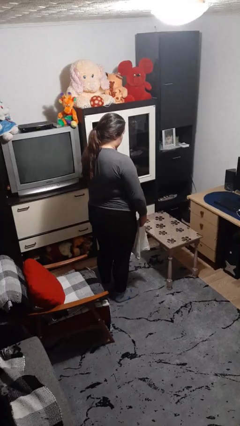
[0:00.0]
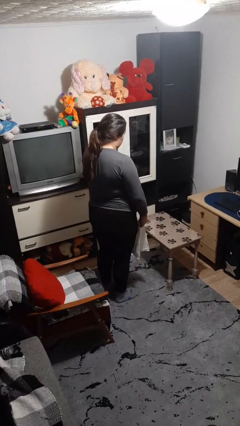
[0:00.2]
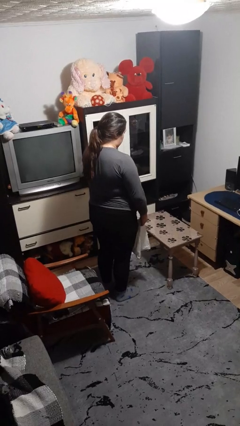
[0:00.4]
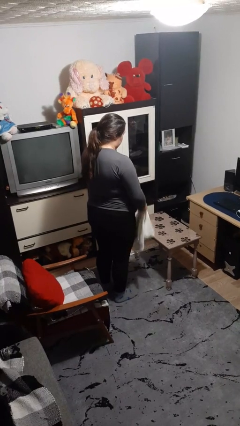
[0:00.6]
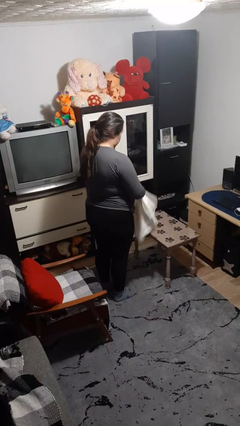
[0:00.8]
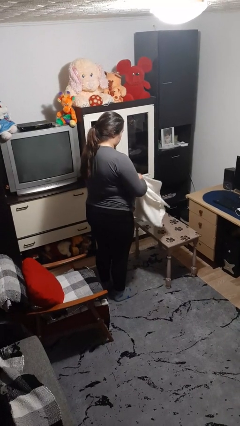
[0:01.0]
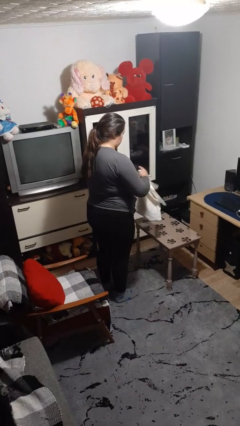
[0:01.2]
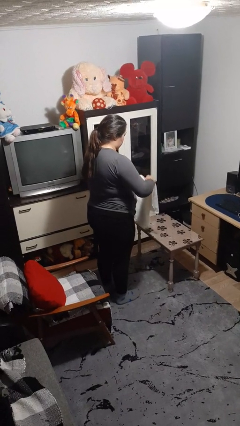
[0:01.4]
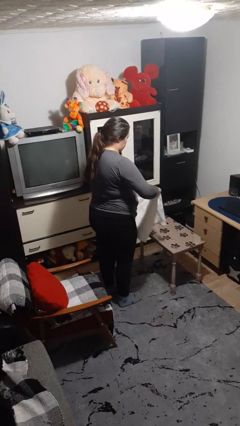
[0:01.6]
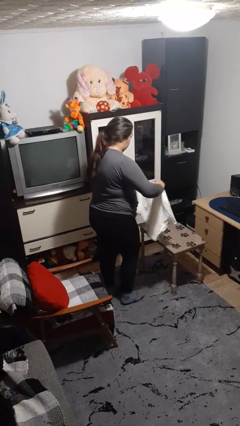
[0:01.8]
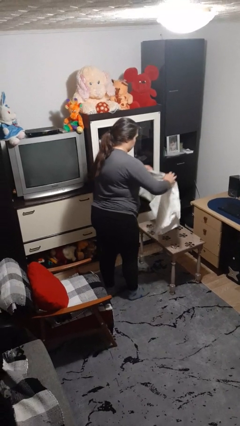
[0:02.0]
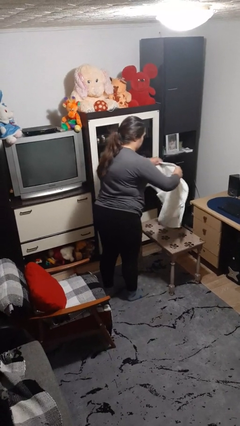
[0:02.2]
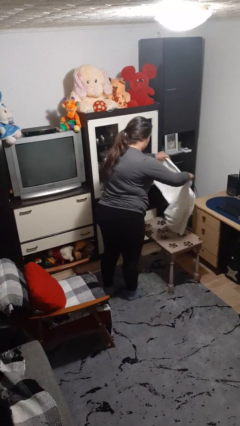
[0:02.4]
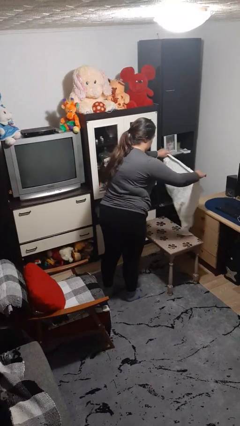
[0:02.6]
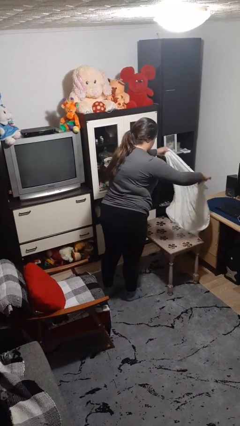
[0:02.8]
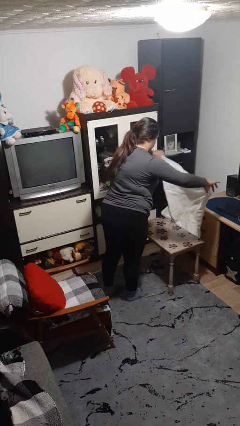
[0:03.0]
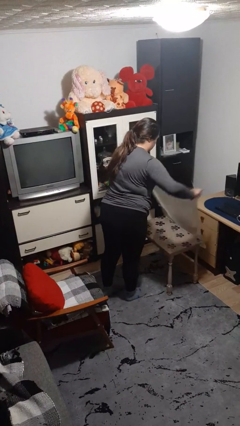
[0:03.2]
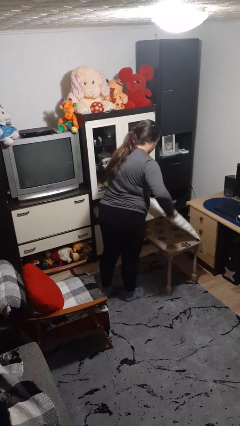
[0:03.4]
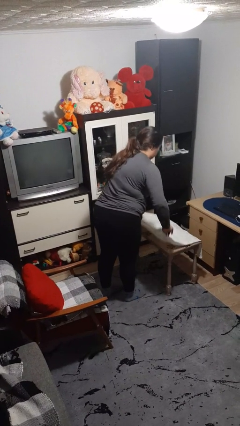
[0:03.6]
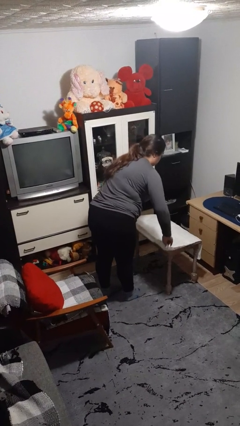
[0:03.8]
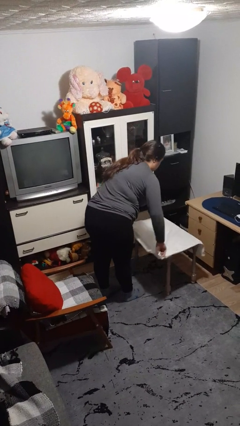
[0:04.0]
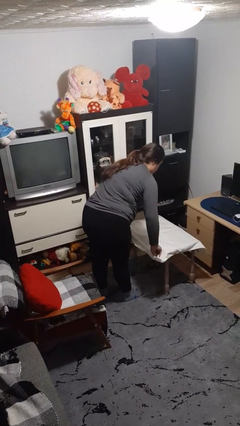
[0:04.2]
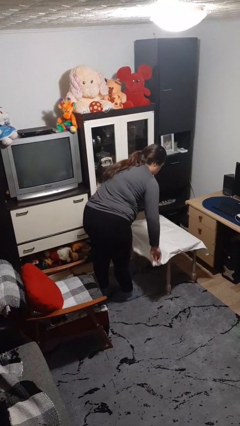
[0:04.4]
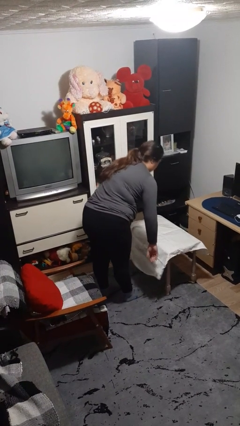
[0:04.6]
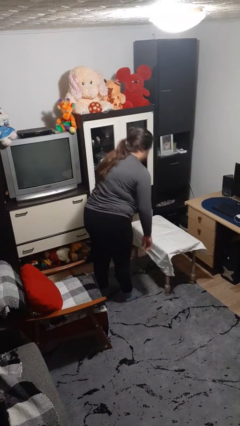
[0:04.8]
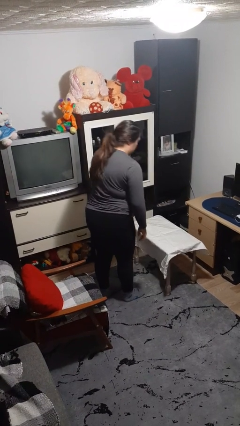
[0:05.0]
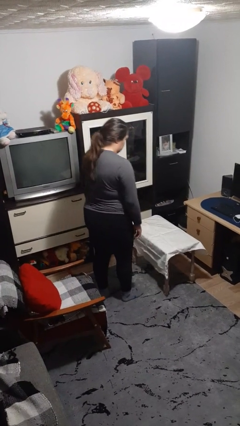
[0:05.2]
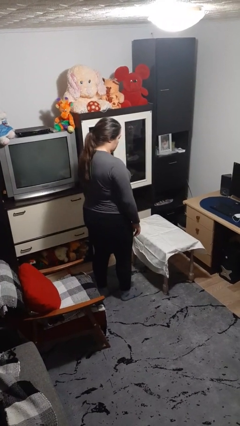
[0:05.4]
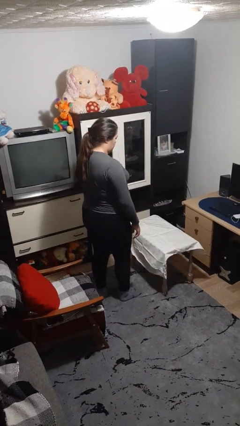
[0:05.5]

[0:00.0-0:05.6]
person spreads tablecloth

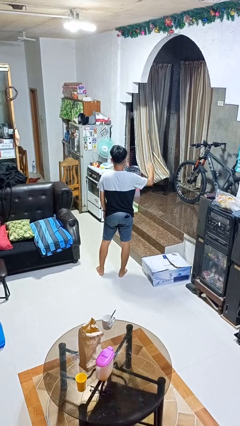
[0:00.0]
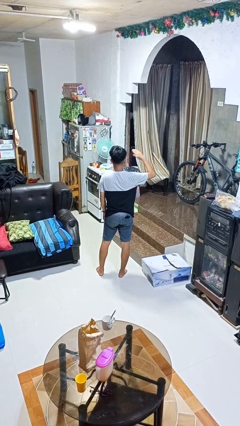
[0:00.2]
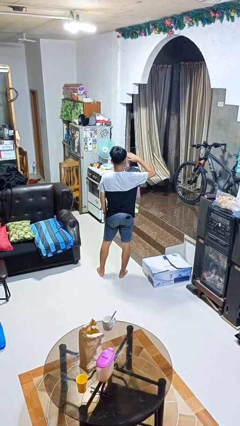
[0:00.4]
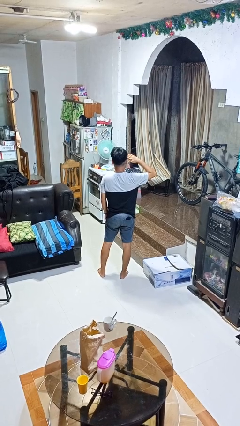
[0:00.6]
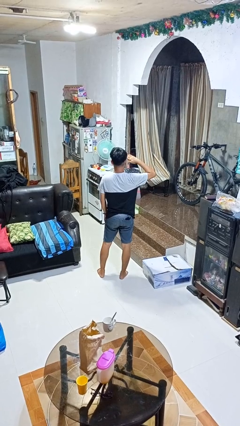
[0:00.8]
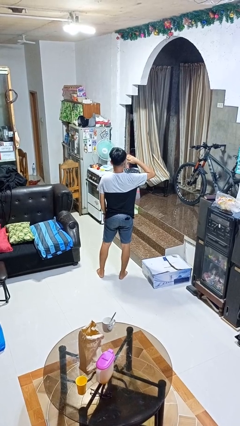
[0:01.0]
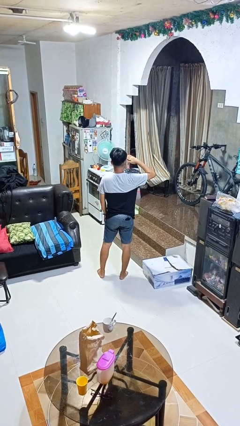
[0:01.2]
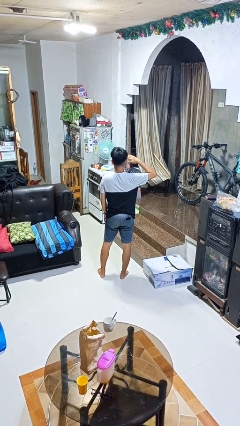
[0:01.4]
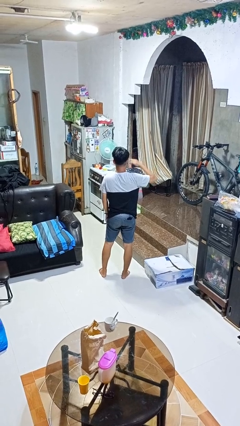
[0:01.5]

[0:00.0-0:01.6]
person salutes

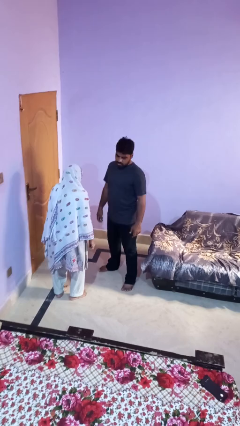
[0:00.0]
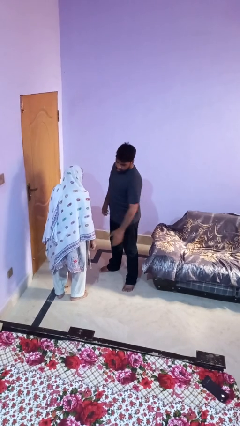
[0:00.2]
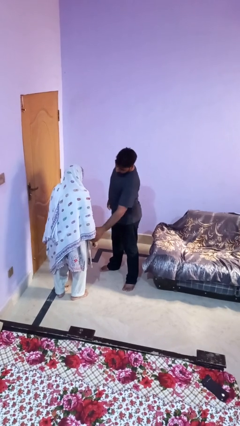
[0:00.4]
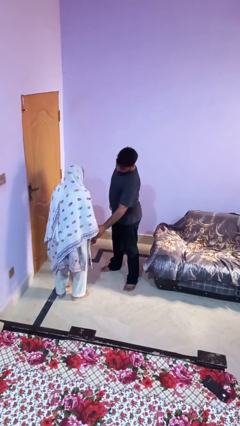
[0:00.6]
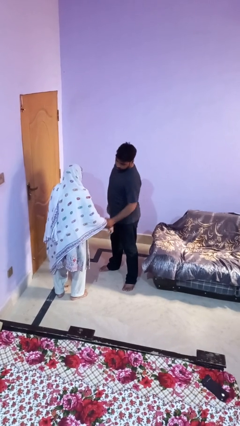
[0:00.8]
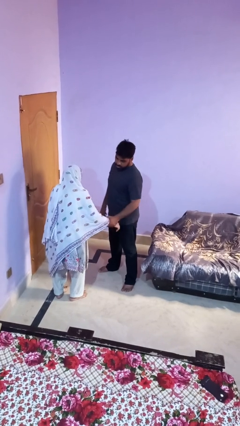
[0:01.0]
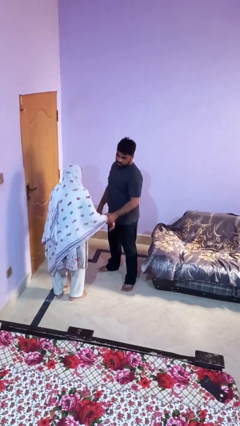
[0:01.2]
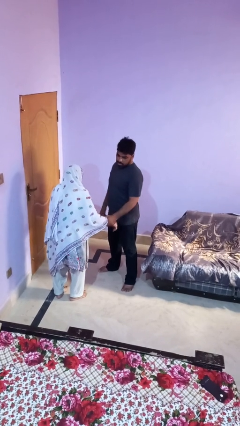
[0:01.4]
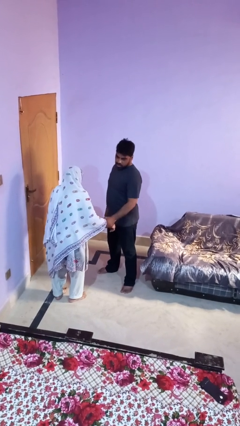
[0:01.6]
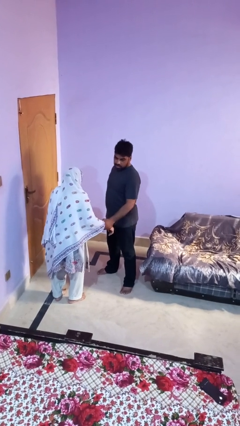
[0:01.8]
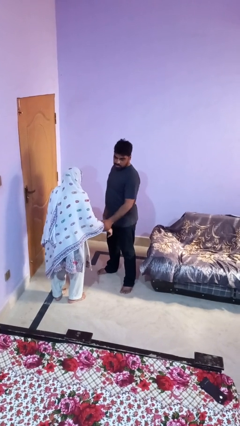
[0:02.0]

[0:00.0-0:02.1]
person grabs person by forearm

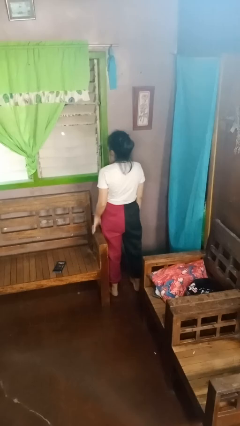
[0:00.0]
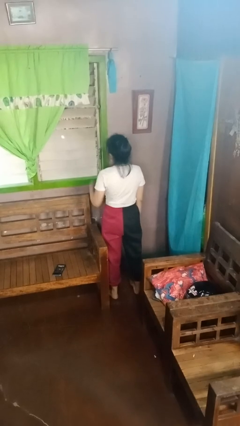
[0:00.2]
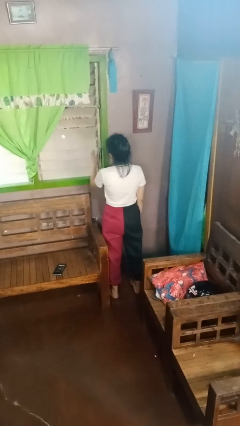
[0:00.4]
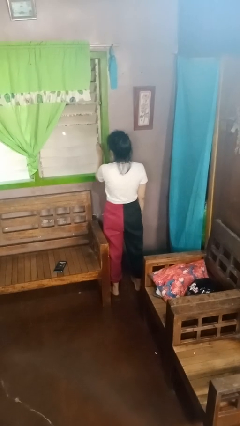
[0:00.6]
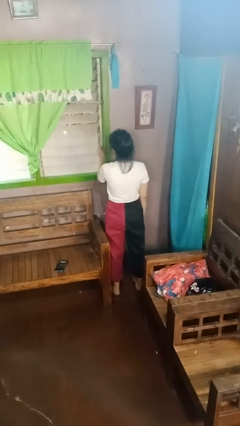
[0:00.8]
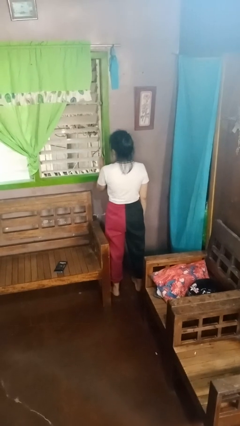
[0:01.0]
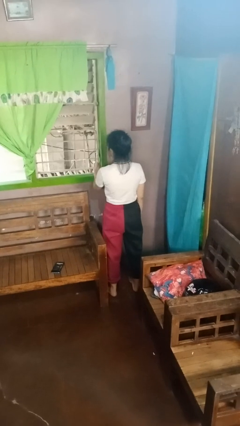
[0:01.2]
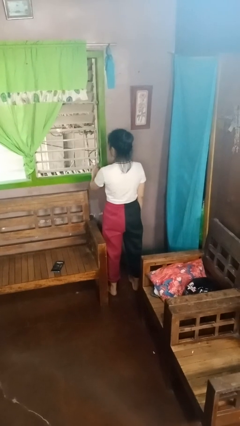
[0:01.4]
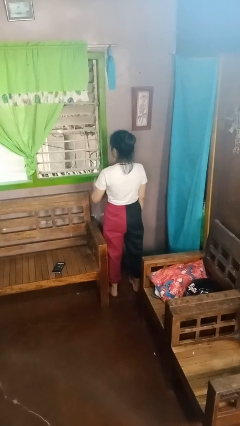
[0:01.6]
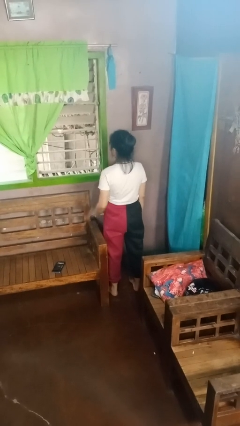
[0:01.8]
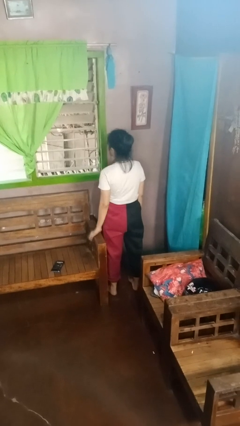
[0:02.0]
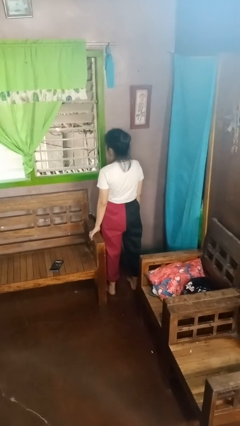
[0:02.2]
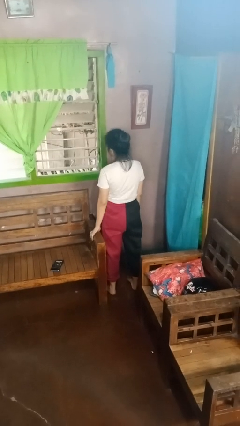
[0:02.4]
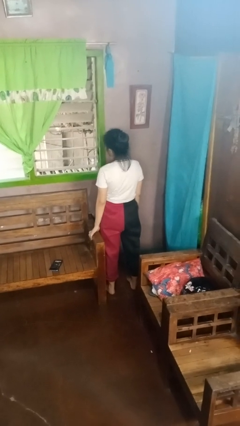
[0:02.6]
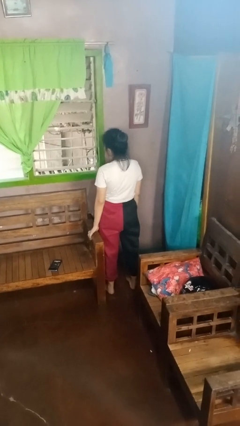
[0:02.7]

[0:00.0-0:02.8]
person opens home window

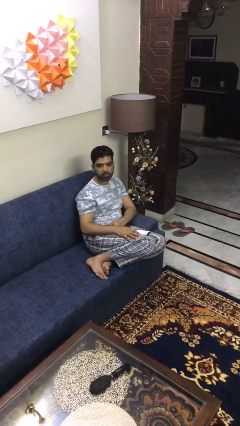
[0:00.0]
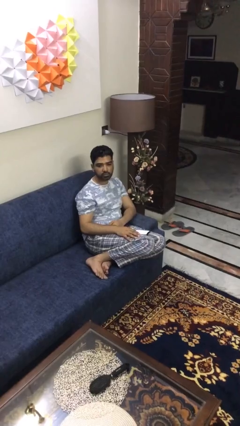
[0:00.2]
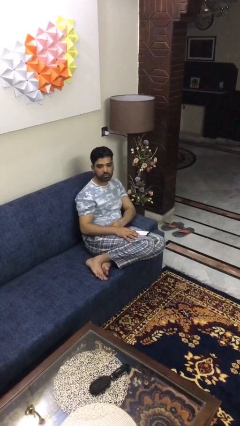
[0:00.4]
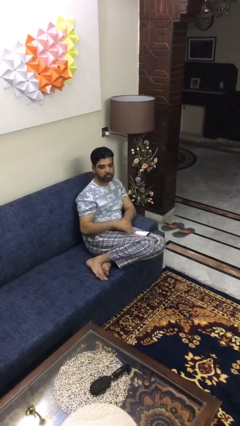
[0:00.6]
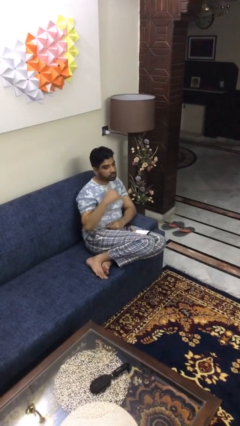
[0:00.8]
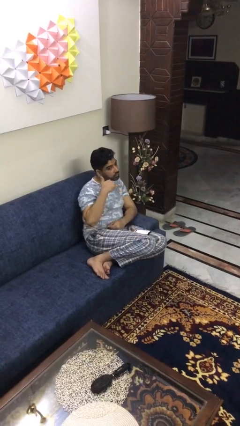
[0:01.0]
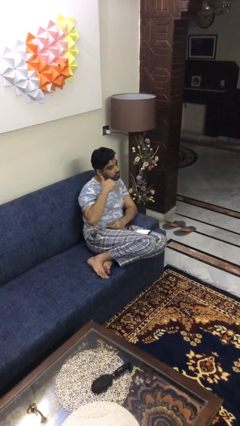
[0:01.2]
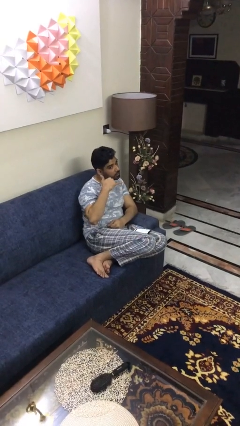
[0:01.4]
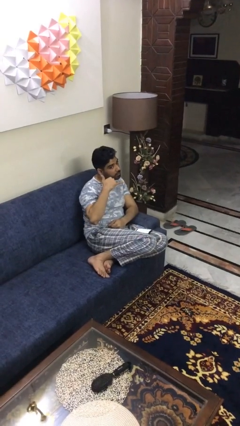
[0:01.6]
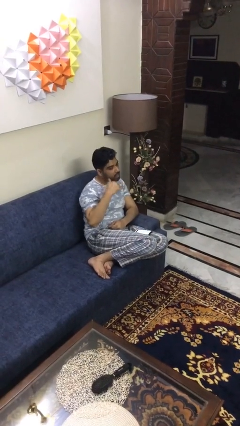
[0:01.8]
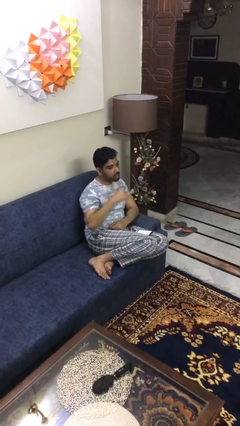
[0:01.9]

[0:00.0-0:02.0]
person gestures call me

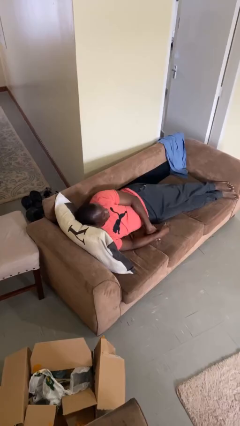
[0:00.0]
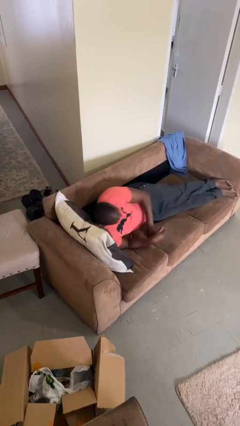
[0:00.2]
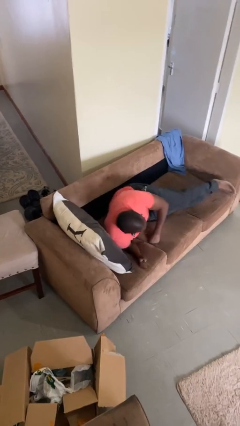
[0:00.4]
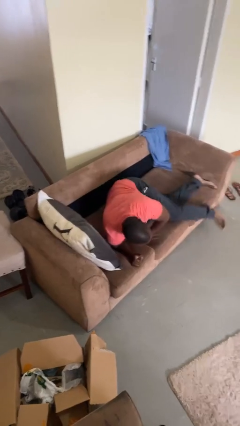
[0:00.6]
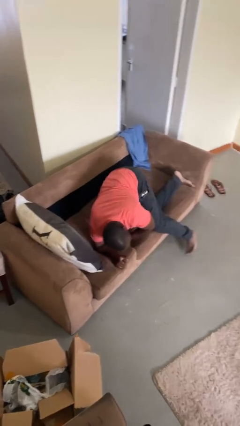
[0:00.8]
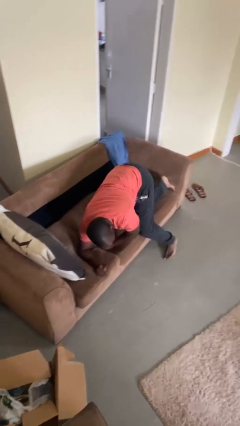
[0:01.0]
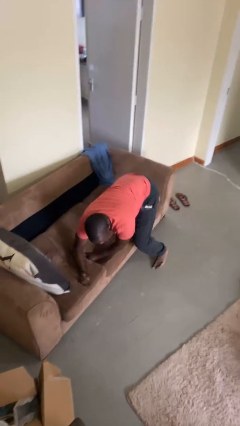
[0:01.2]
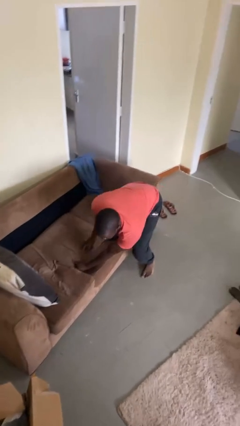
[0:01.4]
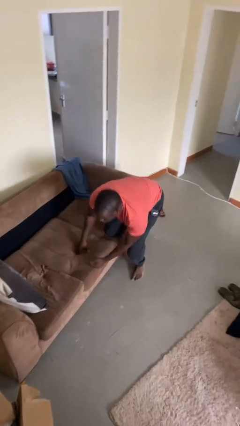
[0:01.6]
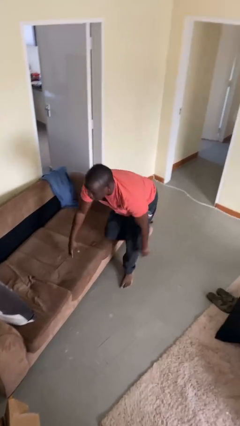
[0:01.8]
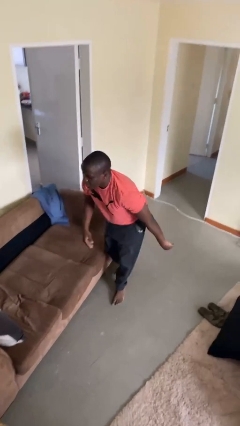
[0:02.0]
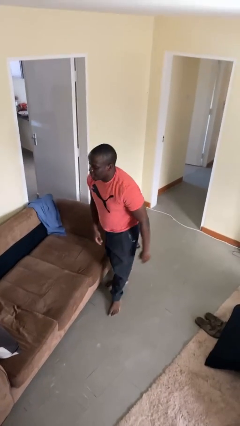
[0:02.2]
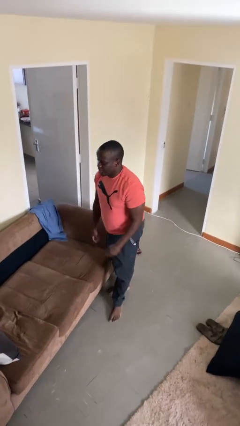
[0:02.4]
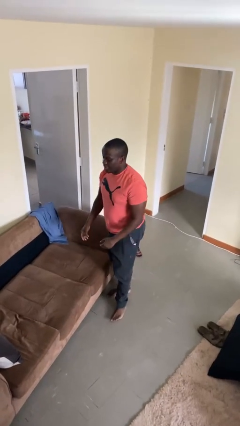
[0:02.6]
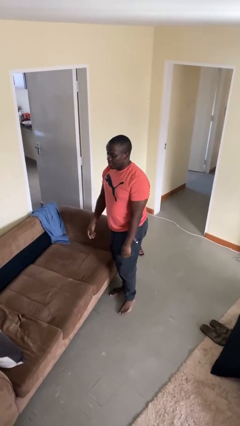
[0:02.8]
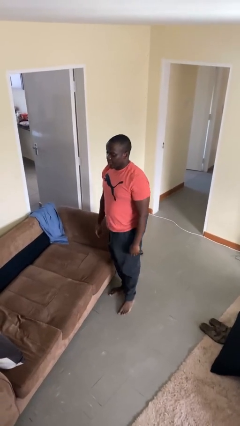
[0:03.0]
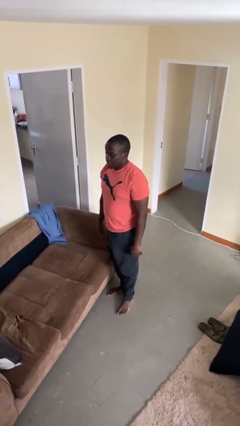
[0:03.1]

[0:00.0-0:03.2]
person stands up
